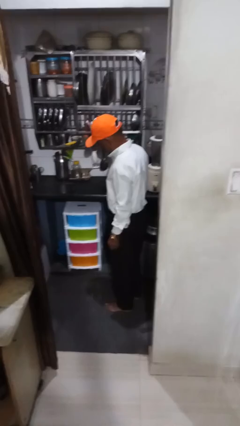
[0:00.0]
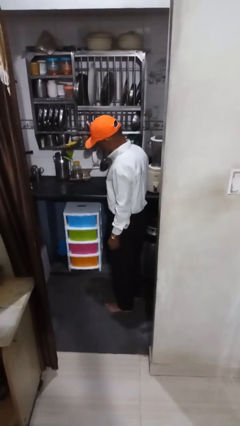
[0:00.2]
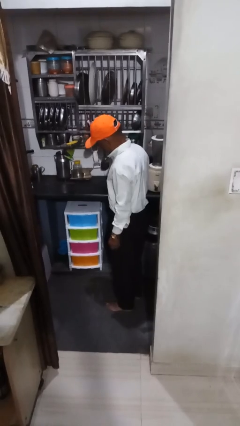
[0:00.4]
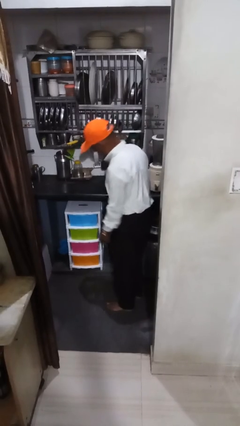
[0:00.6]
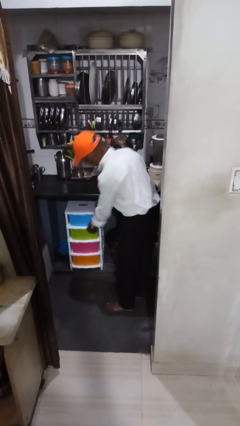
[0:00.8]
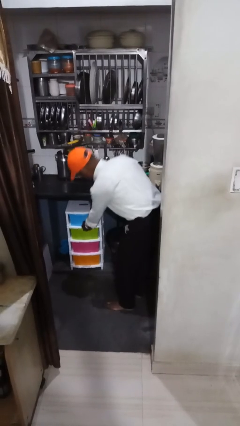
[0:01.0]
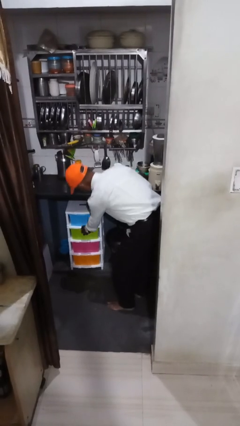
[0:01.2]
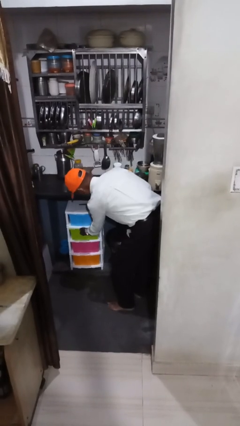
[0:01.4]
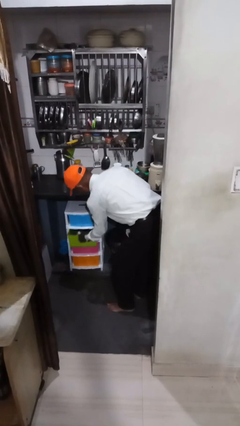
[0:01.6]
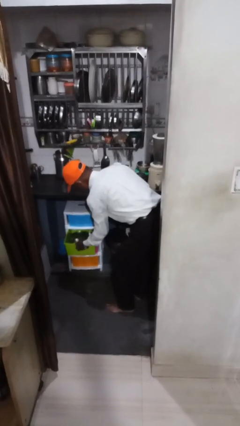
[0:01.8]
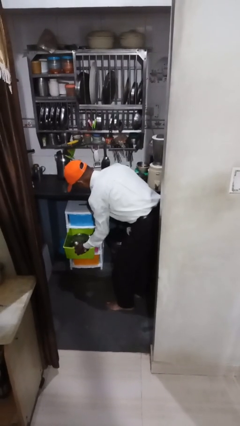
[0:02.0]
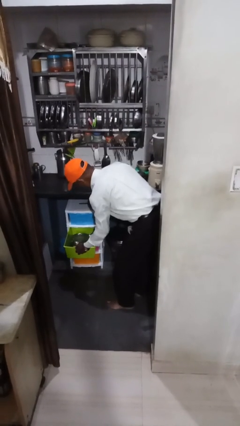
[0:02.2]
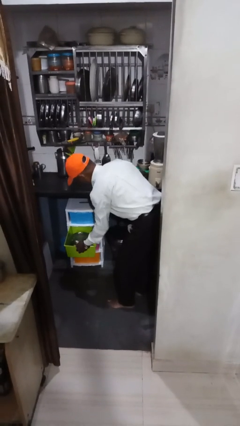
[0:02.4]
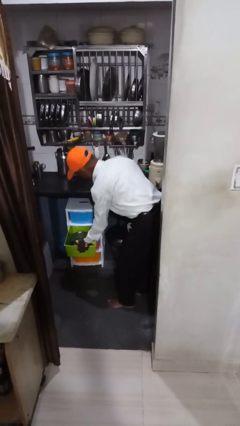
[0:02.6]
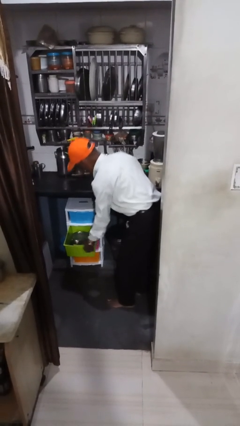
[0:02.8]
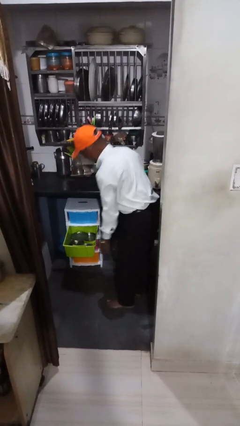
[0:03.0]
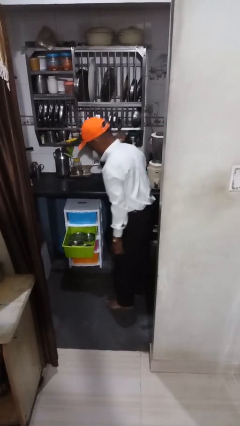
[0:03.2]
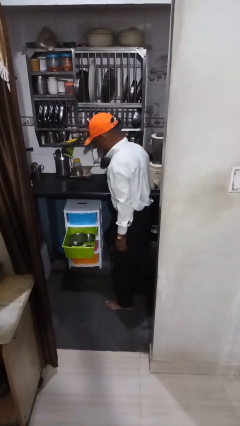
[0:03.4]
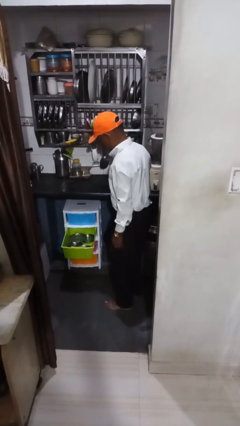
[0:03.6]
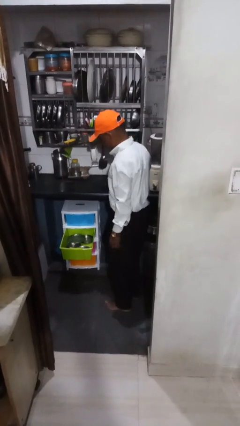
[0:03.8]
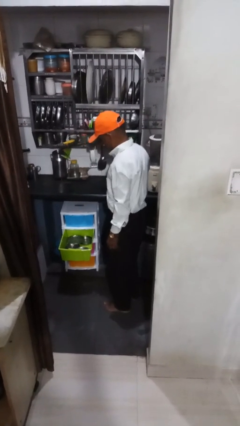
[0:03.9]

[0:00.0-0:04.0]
person opens kitchen drawer

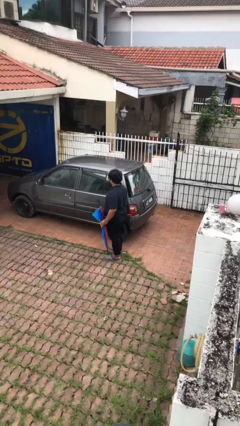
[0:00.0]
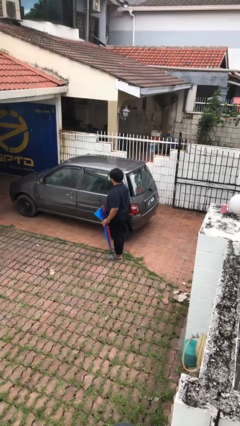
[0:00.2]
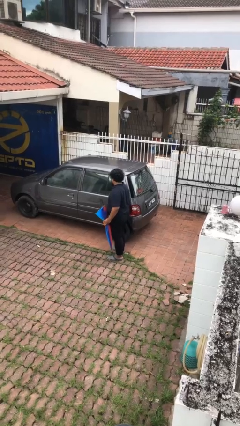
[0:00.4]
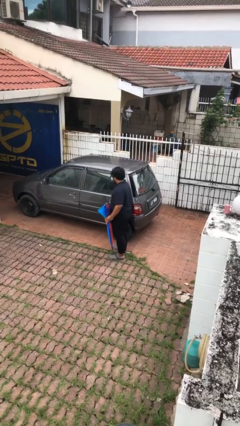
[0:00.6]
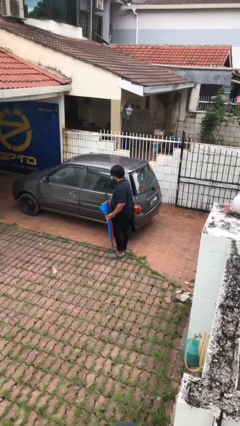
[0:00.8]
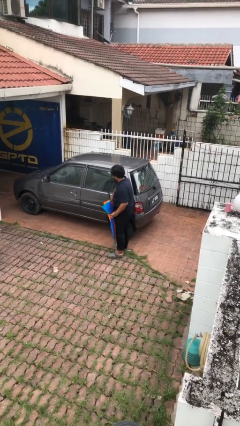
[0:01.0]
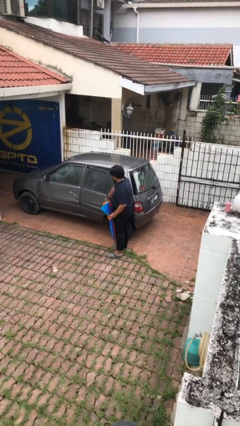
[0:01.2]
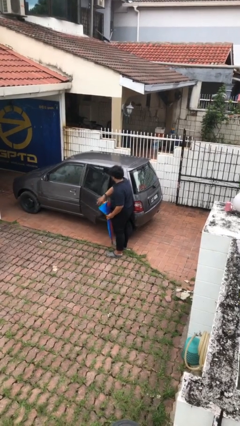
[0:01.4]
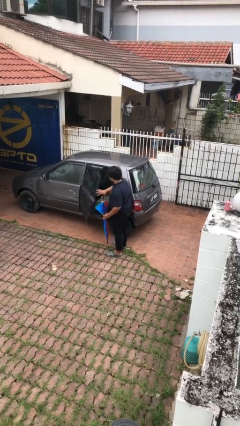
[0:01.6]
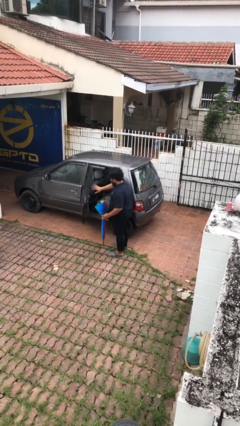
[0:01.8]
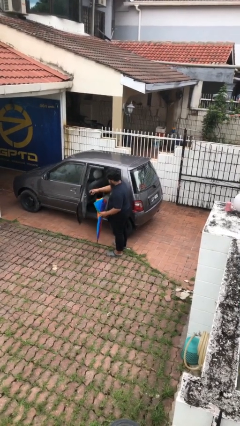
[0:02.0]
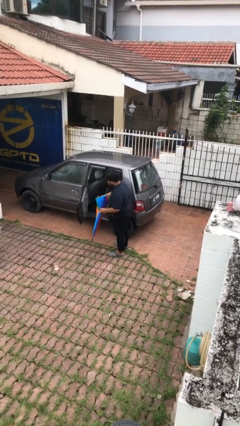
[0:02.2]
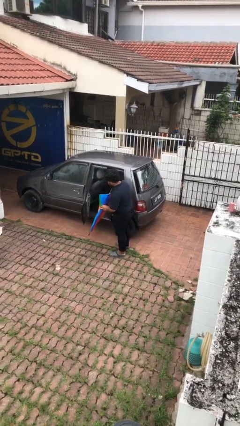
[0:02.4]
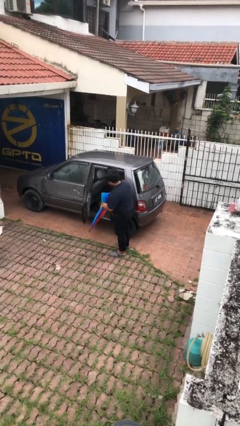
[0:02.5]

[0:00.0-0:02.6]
person opens car door

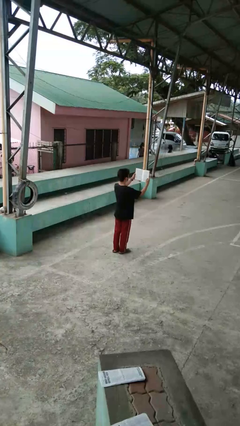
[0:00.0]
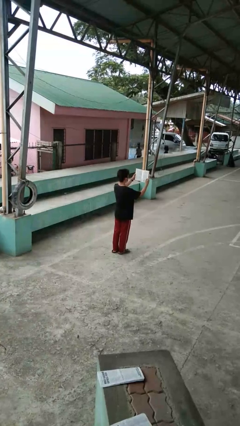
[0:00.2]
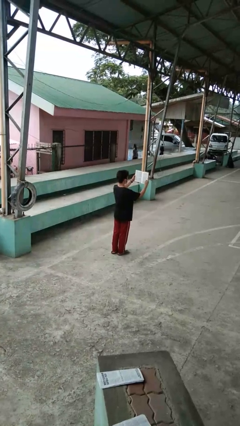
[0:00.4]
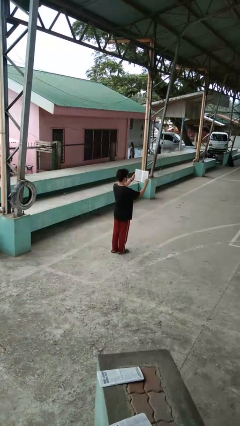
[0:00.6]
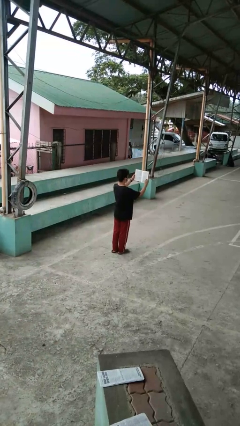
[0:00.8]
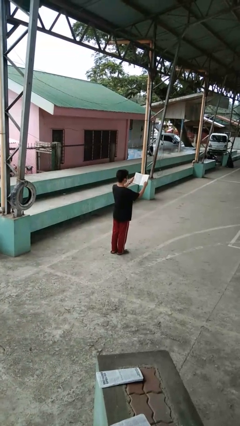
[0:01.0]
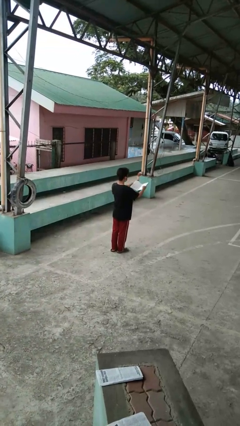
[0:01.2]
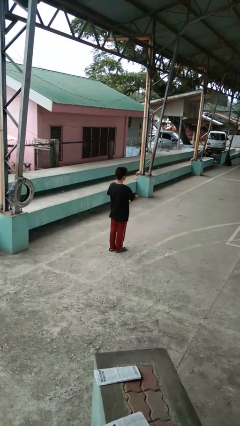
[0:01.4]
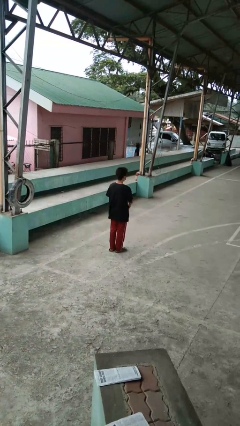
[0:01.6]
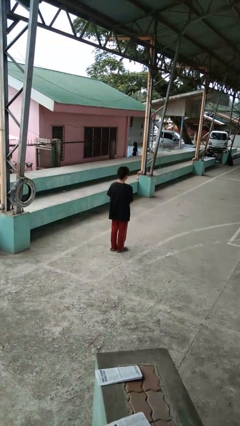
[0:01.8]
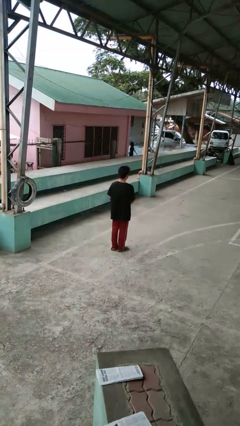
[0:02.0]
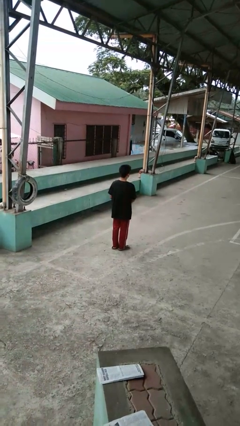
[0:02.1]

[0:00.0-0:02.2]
person reads book

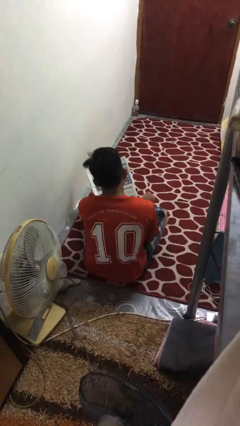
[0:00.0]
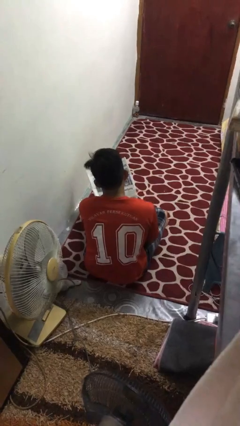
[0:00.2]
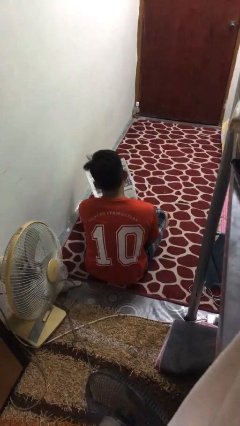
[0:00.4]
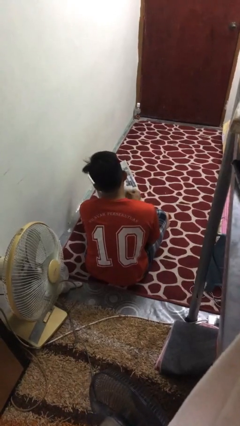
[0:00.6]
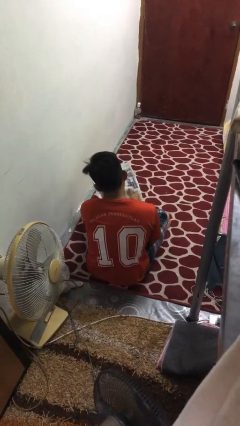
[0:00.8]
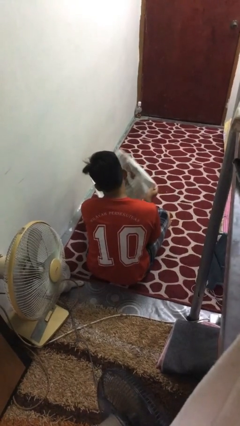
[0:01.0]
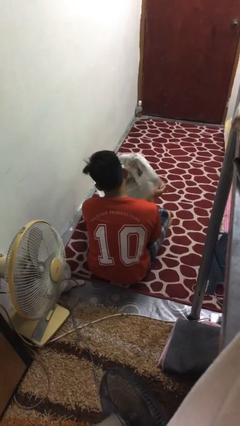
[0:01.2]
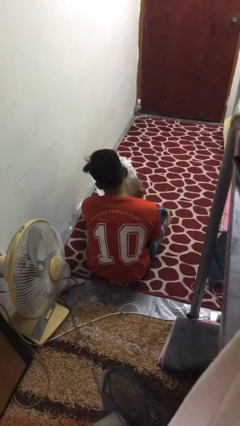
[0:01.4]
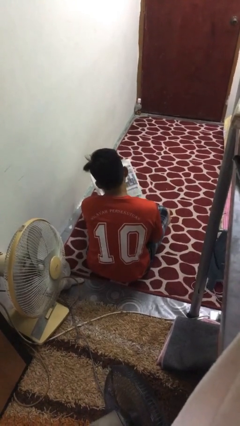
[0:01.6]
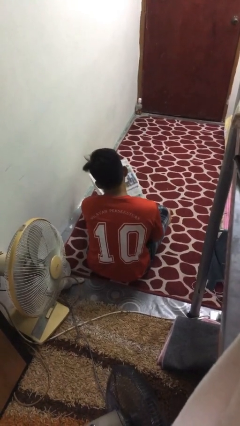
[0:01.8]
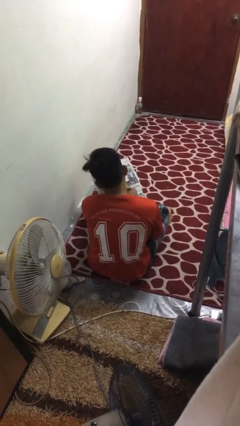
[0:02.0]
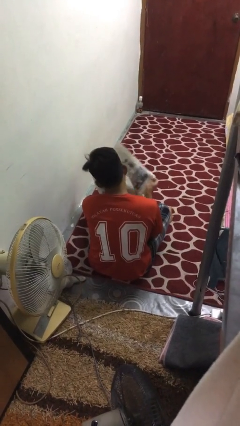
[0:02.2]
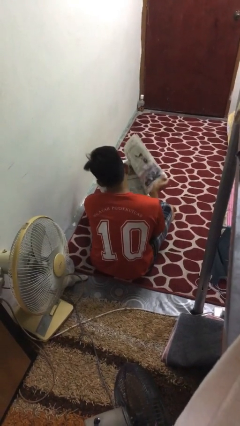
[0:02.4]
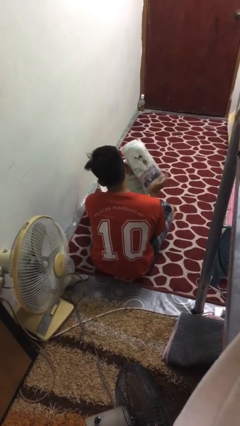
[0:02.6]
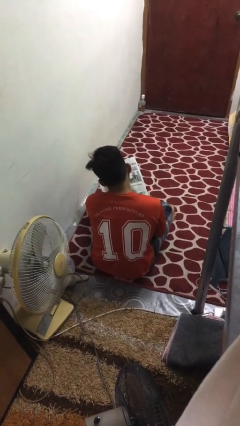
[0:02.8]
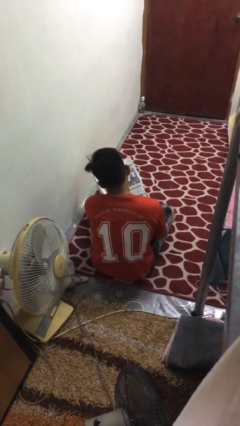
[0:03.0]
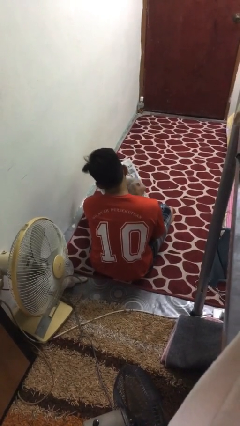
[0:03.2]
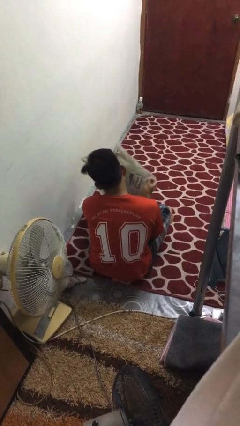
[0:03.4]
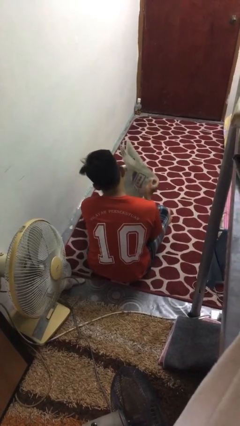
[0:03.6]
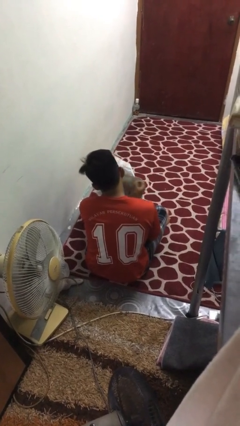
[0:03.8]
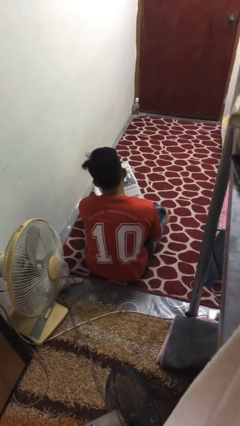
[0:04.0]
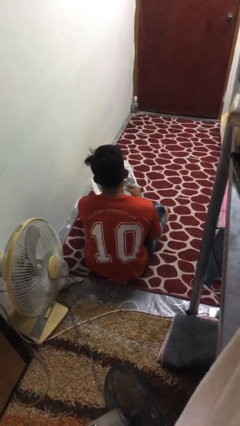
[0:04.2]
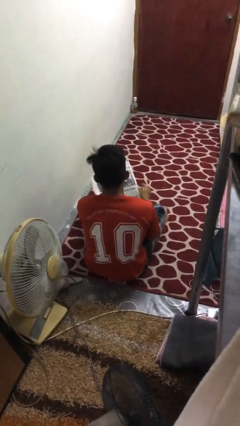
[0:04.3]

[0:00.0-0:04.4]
person reads newspaper

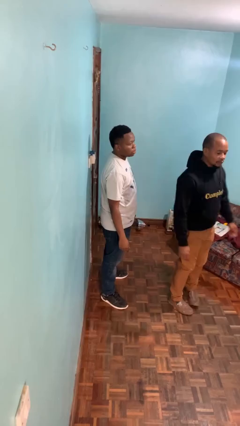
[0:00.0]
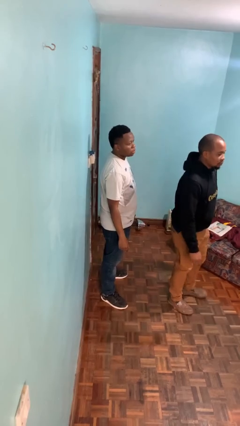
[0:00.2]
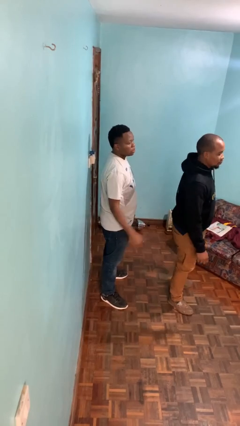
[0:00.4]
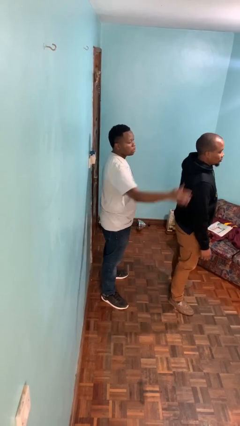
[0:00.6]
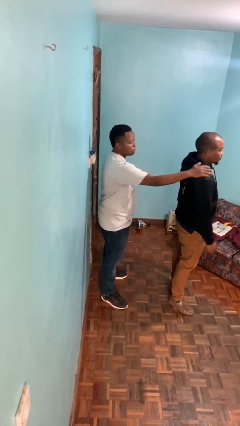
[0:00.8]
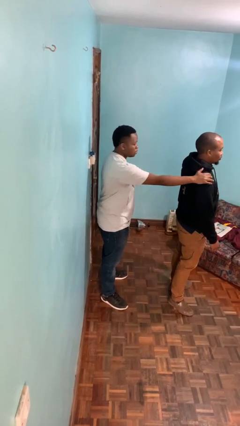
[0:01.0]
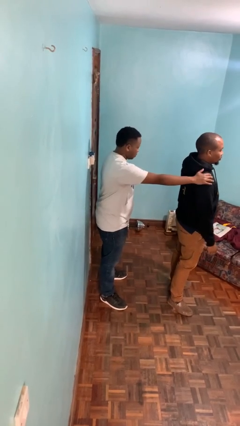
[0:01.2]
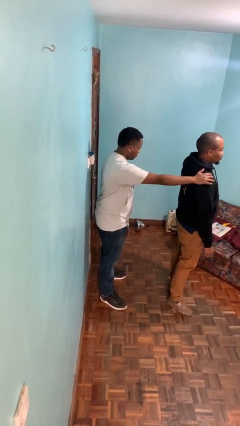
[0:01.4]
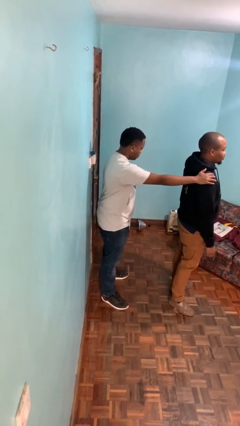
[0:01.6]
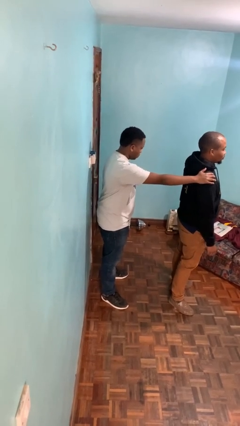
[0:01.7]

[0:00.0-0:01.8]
person grabs person by shoulder

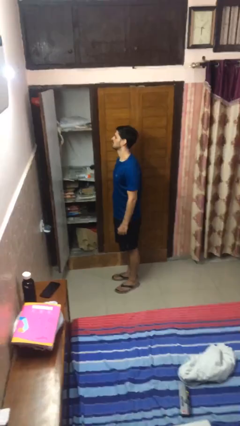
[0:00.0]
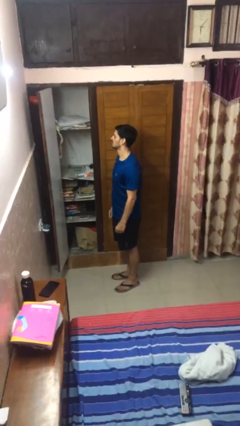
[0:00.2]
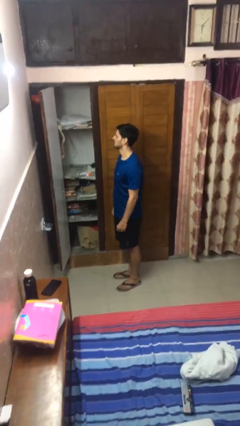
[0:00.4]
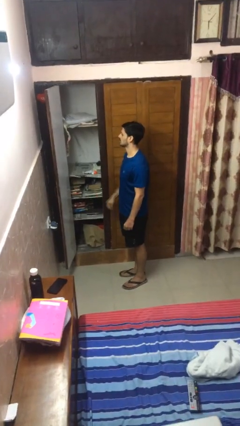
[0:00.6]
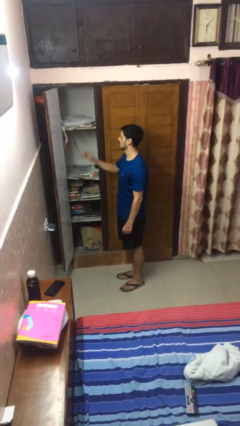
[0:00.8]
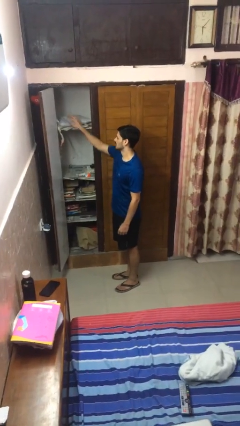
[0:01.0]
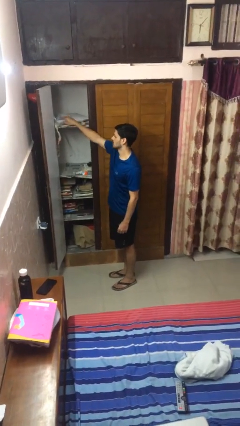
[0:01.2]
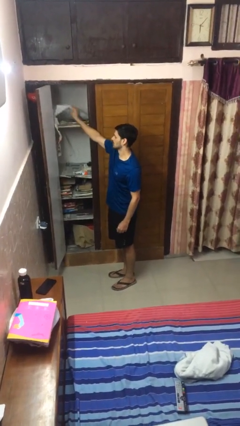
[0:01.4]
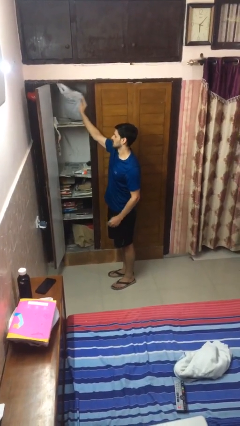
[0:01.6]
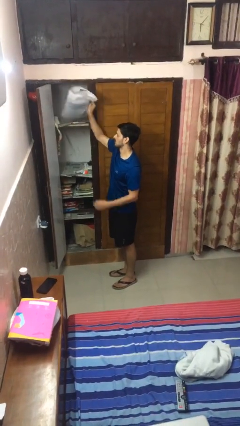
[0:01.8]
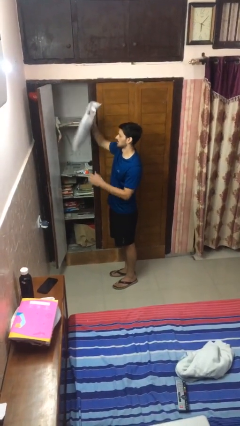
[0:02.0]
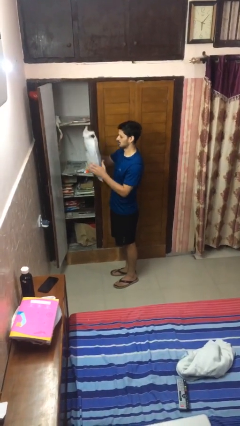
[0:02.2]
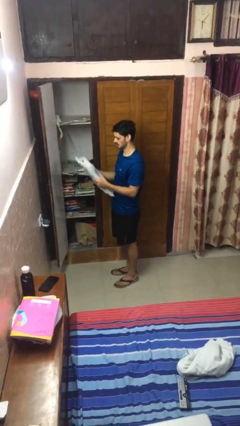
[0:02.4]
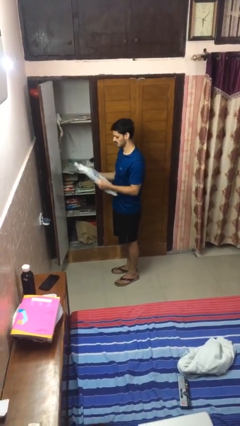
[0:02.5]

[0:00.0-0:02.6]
person picks up object from shelf
